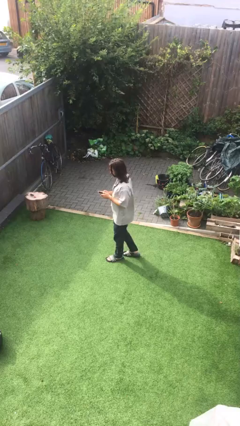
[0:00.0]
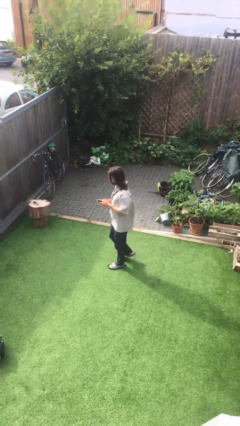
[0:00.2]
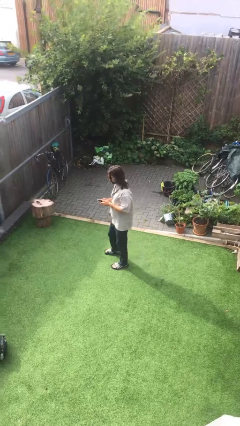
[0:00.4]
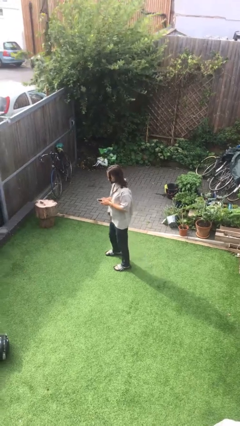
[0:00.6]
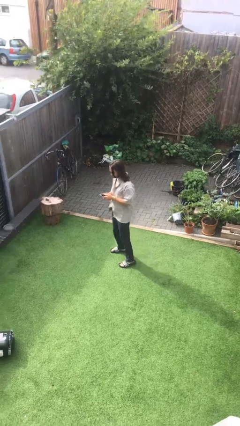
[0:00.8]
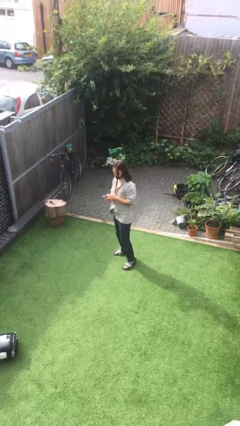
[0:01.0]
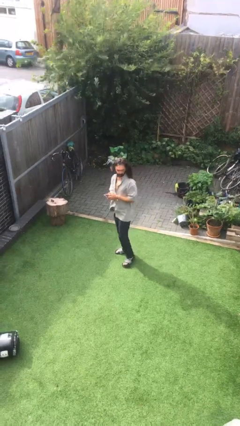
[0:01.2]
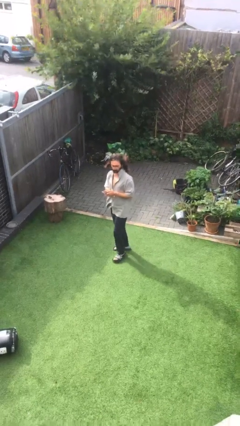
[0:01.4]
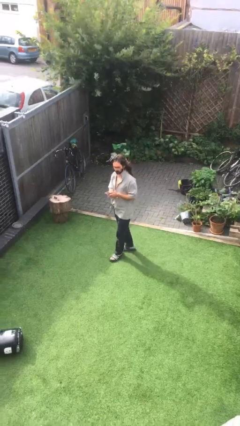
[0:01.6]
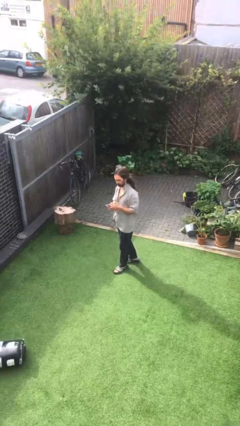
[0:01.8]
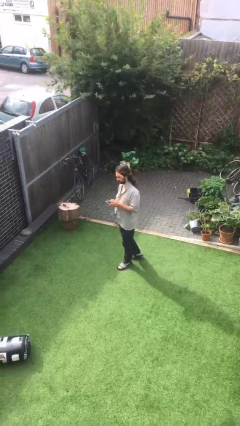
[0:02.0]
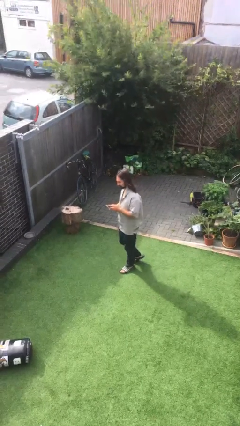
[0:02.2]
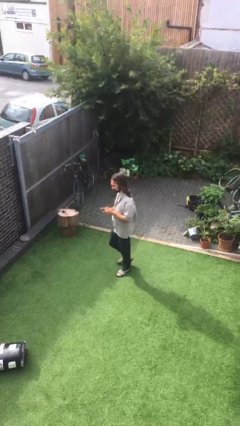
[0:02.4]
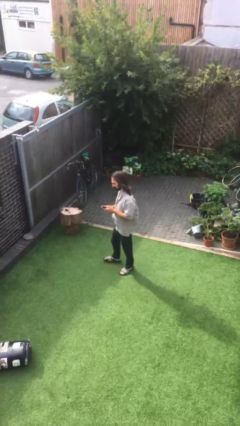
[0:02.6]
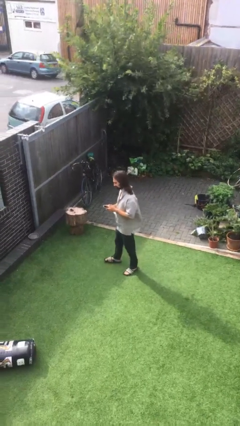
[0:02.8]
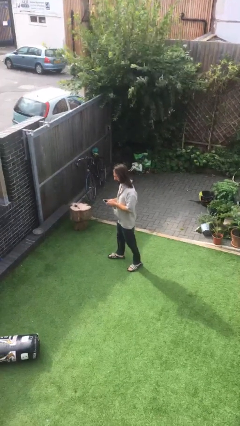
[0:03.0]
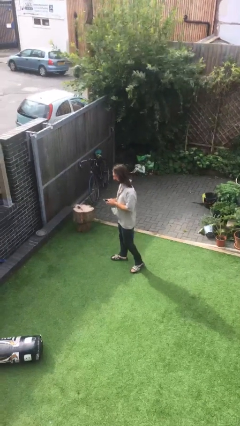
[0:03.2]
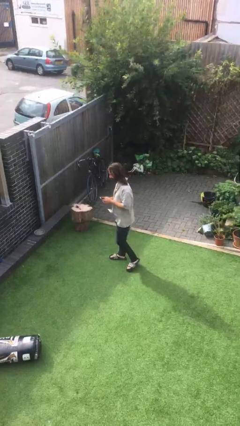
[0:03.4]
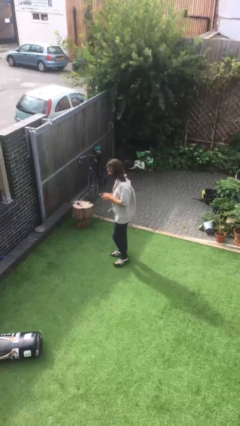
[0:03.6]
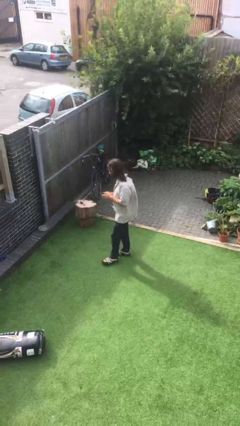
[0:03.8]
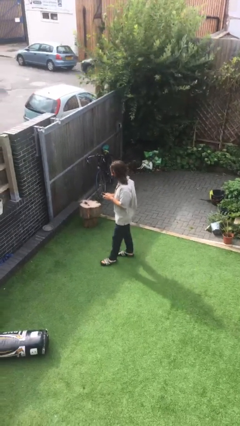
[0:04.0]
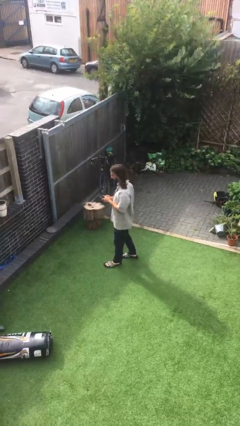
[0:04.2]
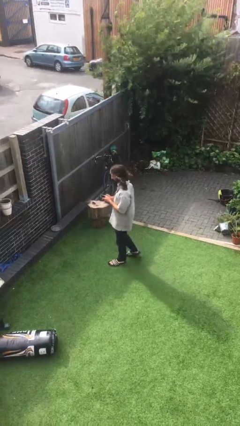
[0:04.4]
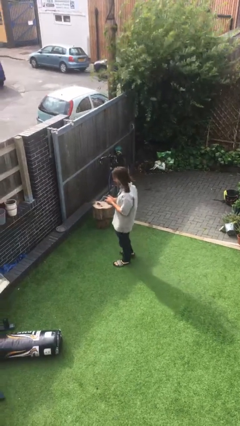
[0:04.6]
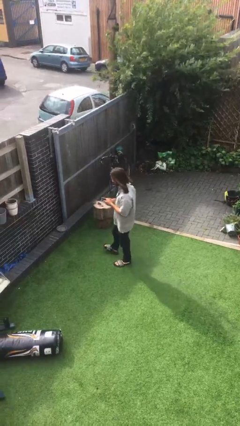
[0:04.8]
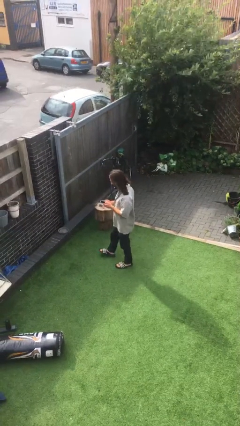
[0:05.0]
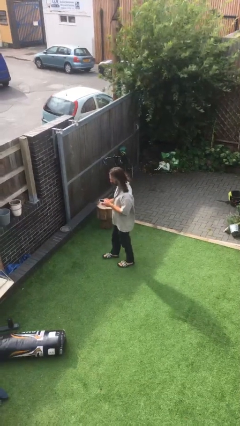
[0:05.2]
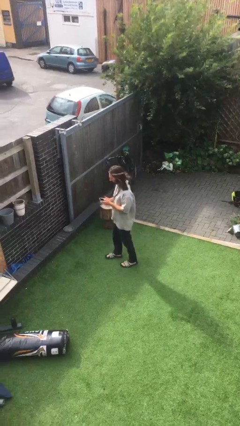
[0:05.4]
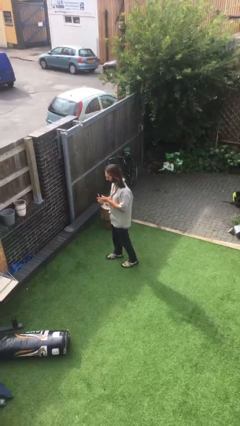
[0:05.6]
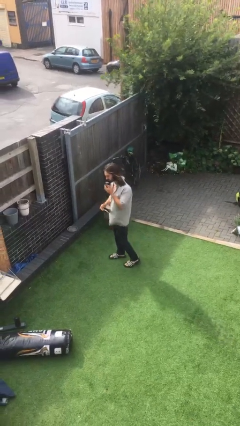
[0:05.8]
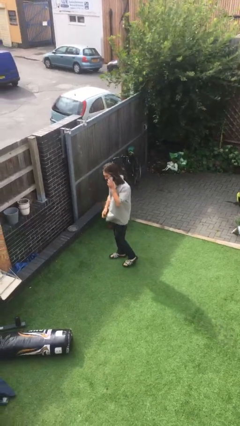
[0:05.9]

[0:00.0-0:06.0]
person texts on phone

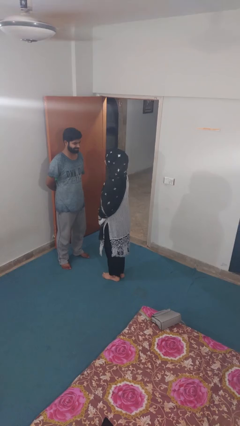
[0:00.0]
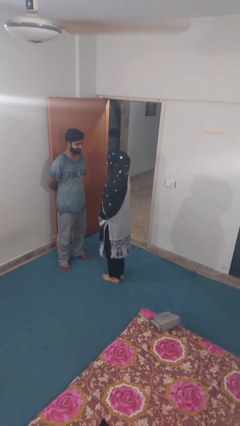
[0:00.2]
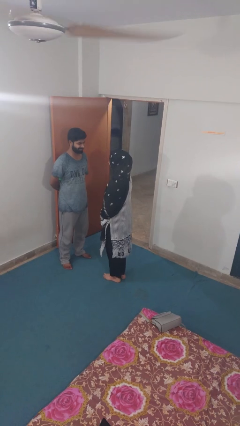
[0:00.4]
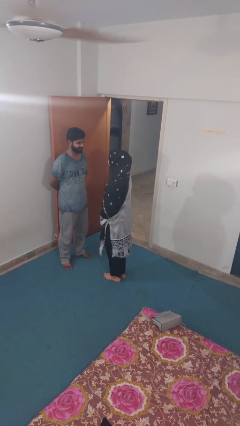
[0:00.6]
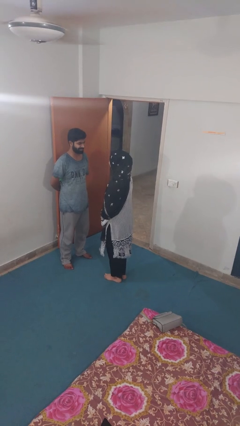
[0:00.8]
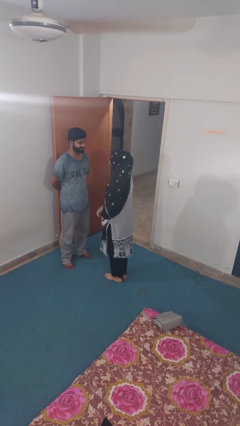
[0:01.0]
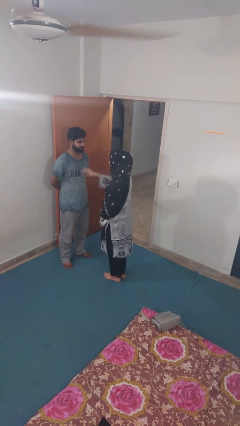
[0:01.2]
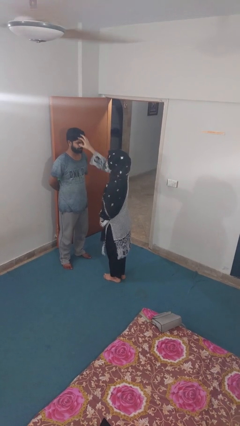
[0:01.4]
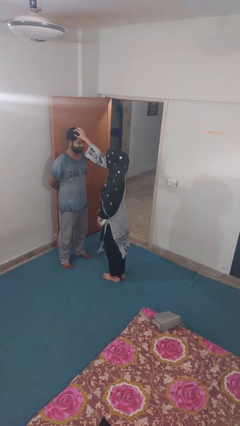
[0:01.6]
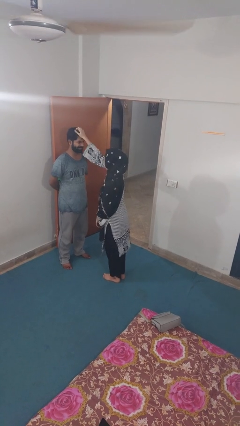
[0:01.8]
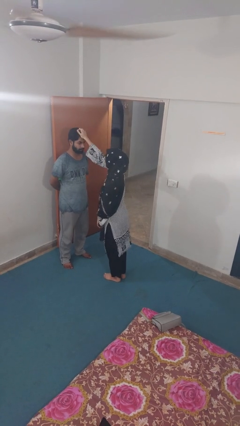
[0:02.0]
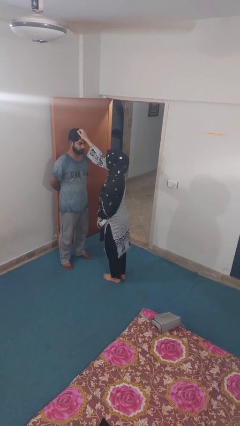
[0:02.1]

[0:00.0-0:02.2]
person grabs person by hair

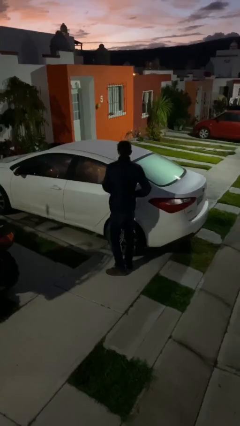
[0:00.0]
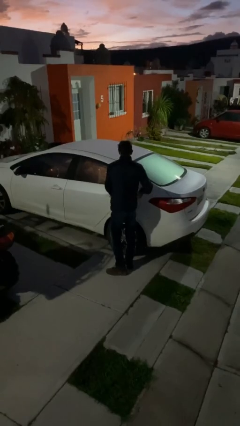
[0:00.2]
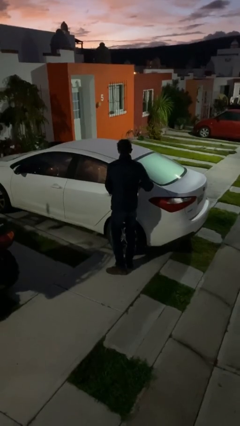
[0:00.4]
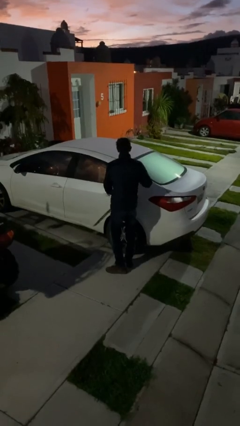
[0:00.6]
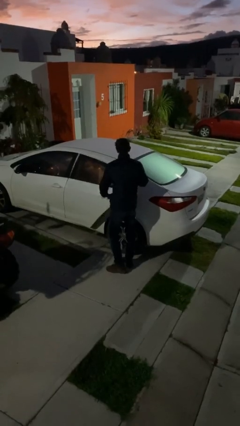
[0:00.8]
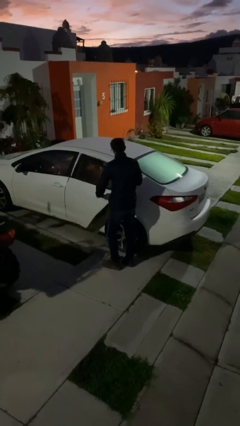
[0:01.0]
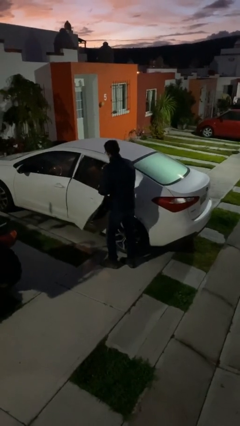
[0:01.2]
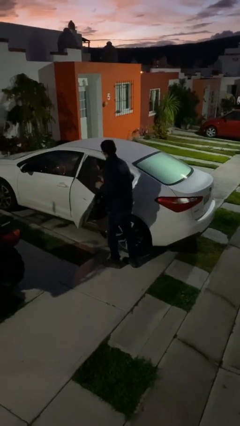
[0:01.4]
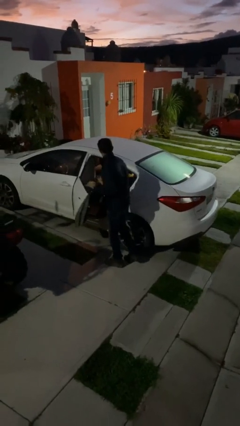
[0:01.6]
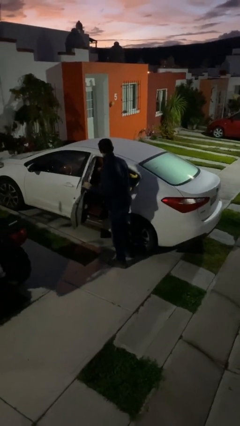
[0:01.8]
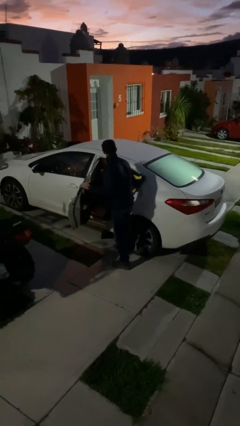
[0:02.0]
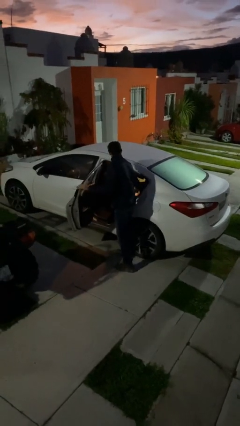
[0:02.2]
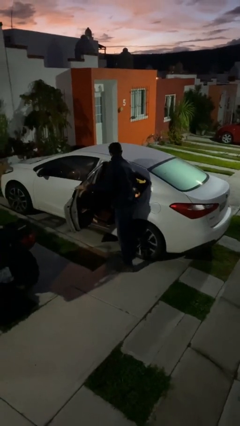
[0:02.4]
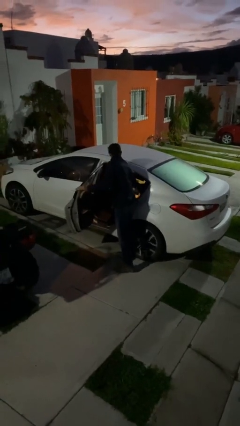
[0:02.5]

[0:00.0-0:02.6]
person opens car door

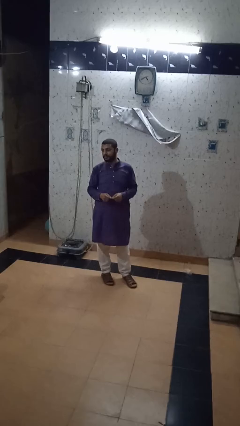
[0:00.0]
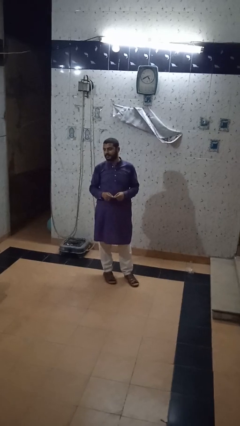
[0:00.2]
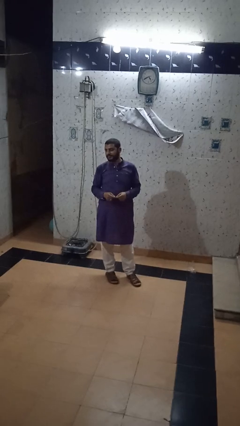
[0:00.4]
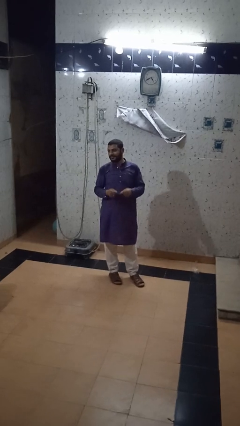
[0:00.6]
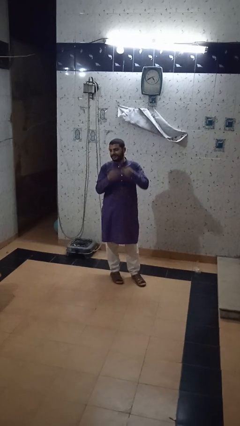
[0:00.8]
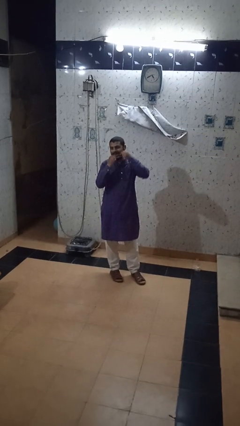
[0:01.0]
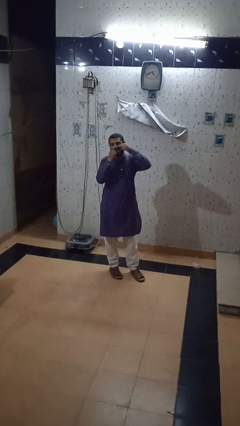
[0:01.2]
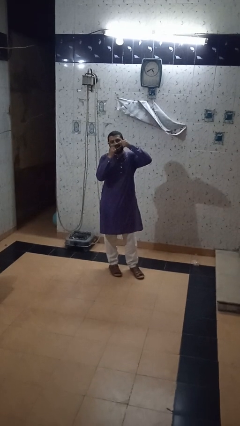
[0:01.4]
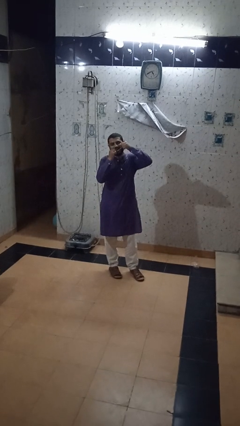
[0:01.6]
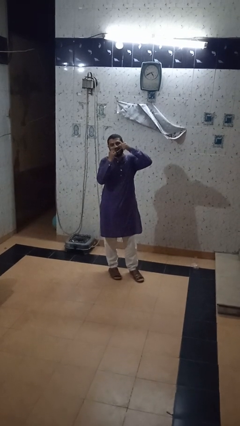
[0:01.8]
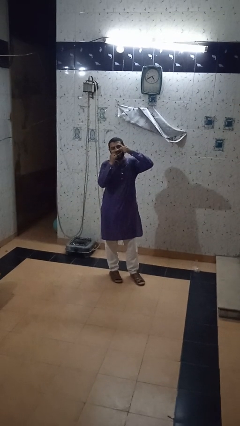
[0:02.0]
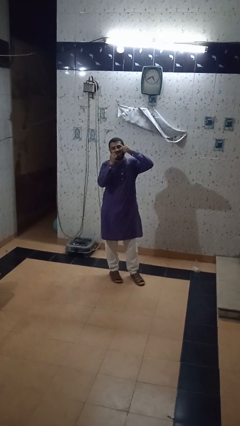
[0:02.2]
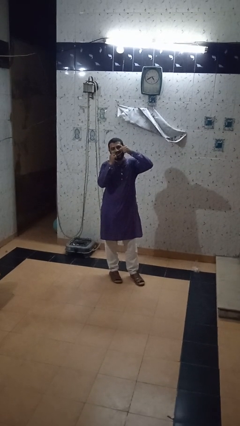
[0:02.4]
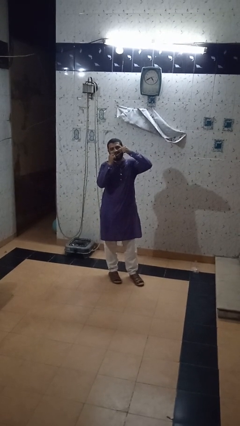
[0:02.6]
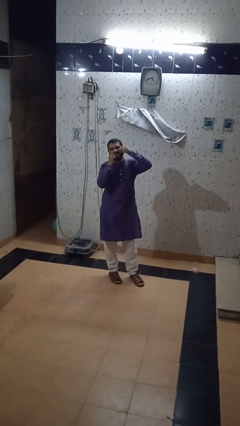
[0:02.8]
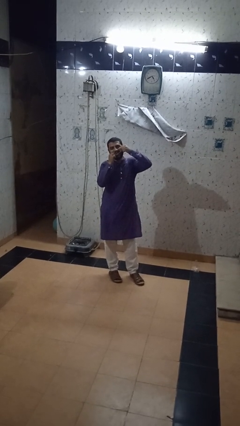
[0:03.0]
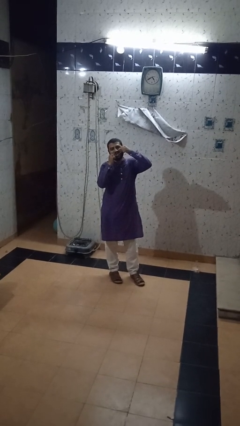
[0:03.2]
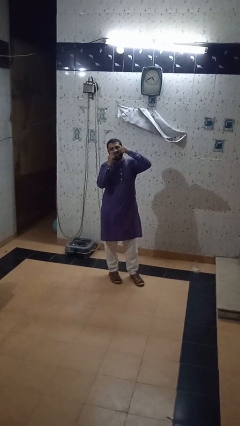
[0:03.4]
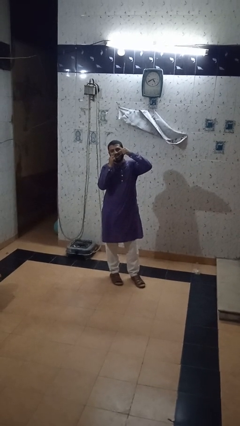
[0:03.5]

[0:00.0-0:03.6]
person flosses

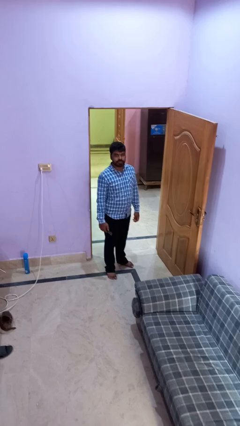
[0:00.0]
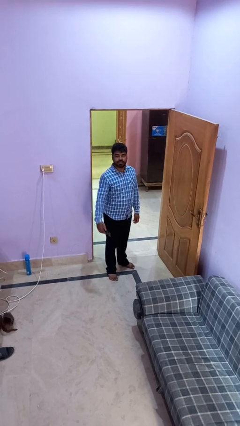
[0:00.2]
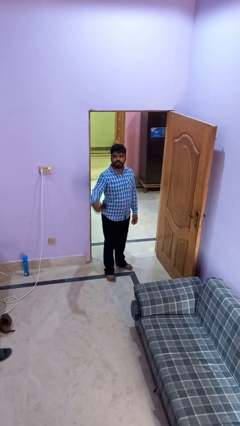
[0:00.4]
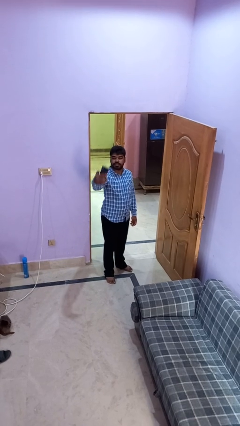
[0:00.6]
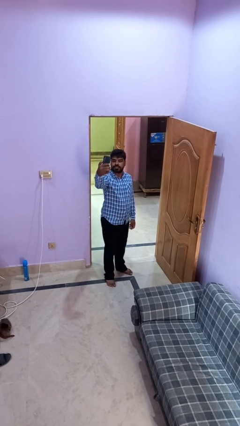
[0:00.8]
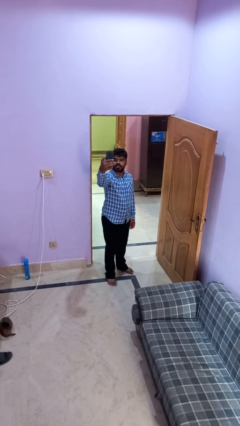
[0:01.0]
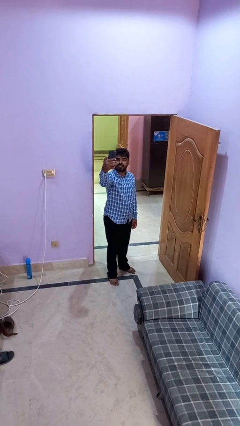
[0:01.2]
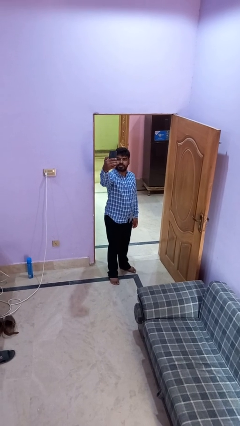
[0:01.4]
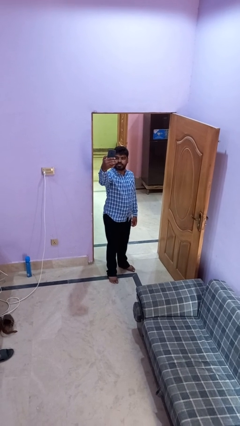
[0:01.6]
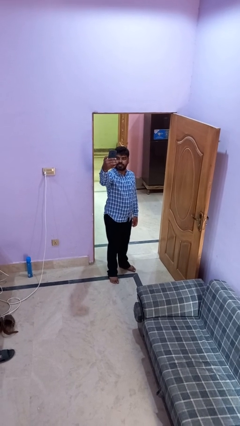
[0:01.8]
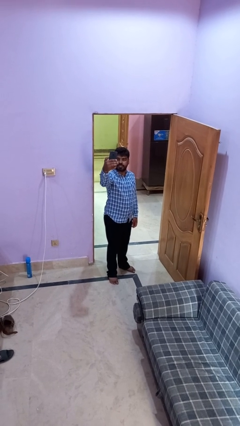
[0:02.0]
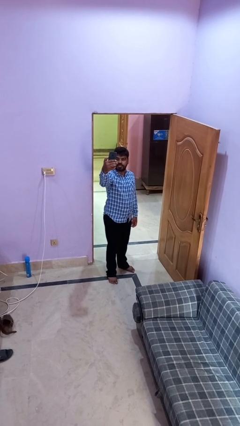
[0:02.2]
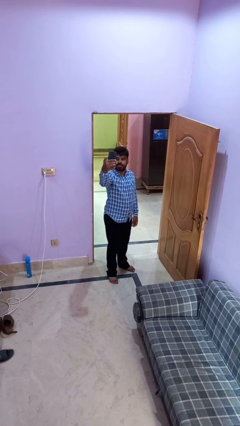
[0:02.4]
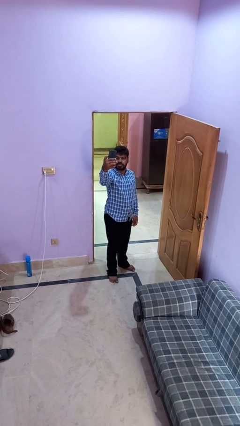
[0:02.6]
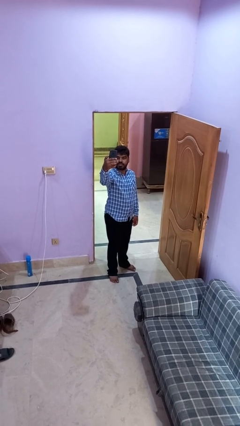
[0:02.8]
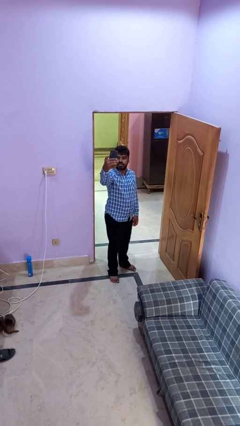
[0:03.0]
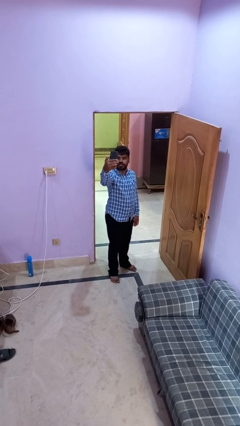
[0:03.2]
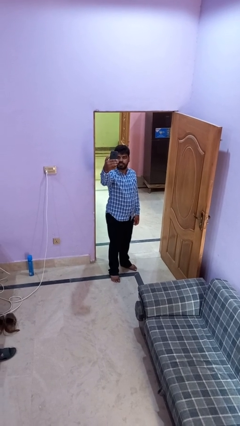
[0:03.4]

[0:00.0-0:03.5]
person takes selfie
